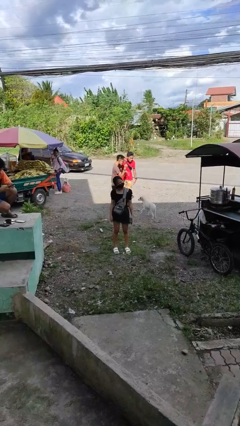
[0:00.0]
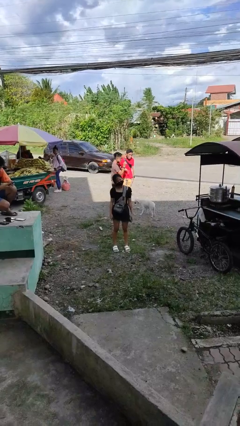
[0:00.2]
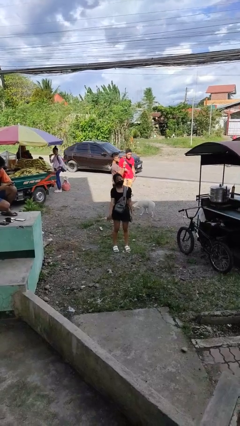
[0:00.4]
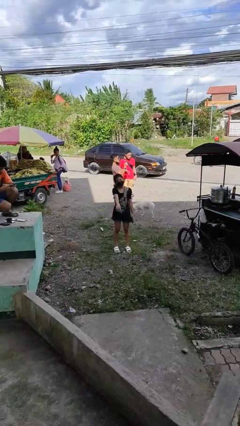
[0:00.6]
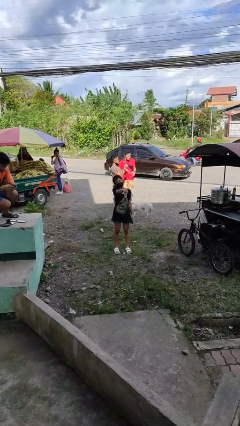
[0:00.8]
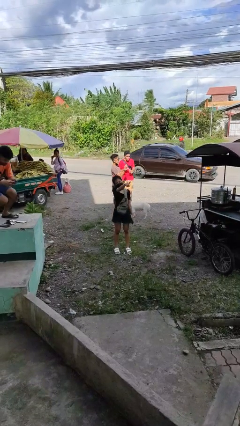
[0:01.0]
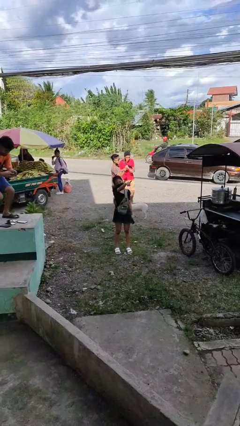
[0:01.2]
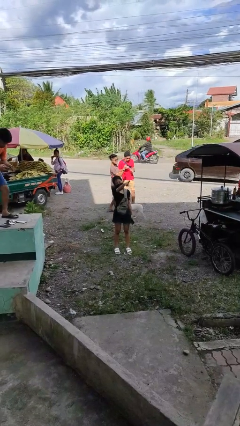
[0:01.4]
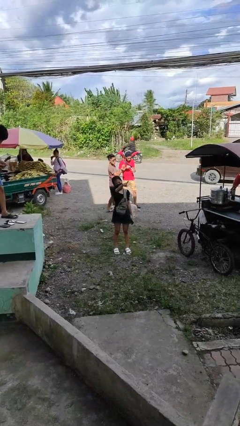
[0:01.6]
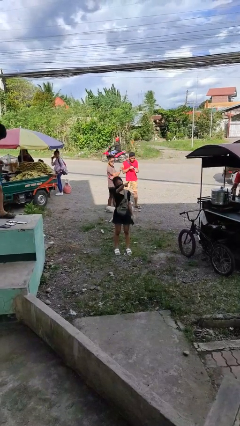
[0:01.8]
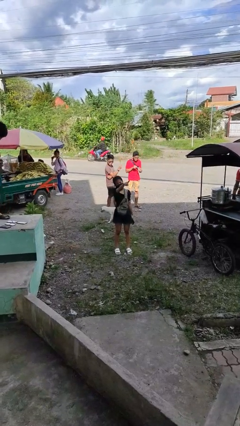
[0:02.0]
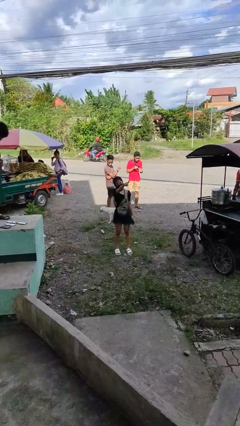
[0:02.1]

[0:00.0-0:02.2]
person points at person

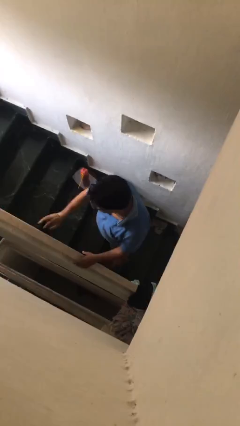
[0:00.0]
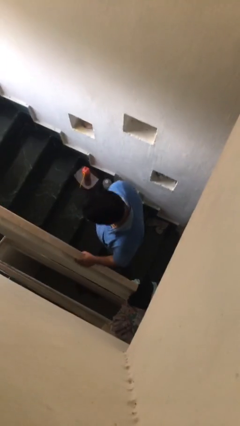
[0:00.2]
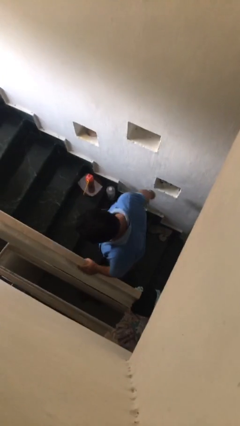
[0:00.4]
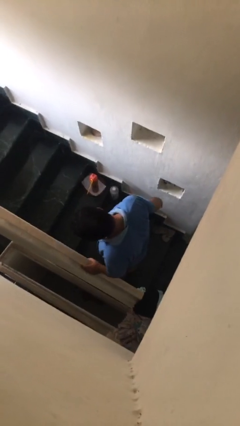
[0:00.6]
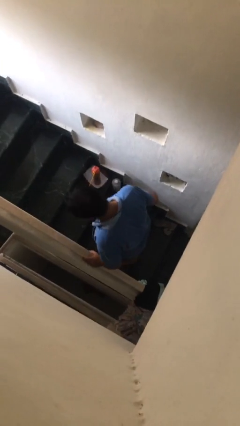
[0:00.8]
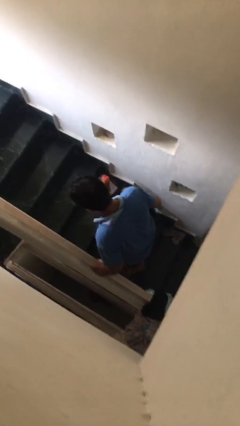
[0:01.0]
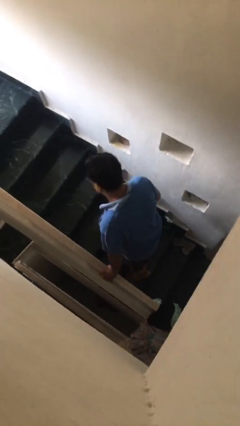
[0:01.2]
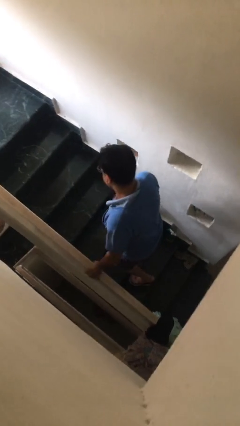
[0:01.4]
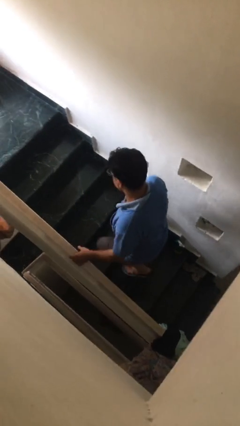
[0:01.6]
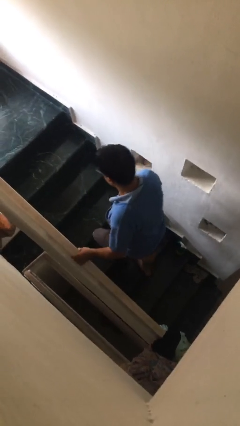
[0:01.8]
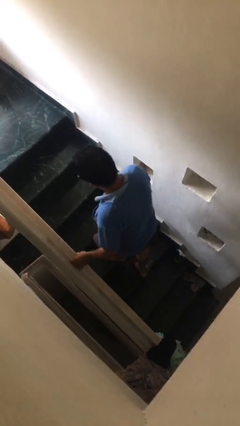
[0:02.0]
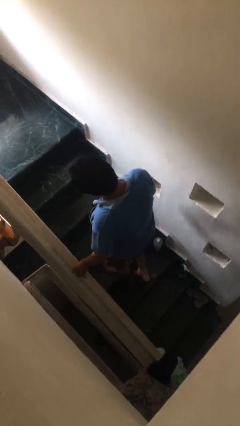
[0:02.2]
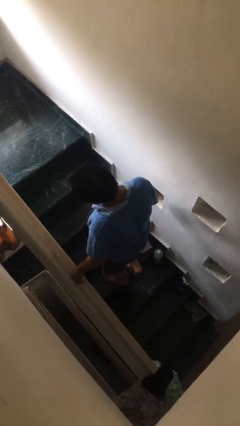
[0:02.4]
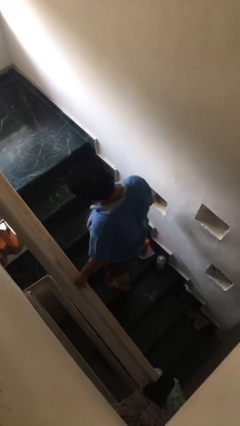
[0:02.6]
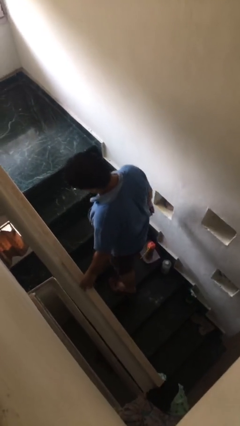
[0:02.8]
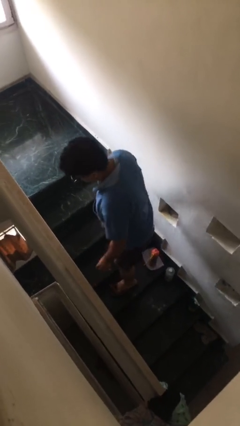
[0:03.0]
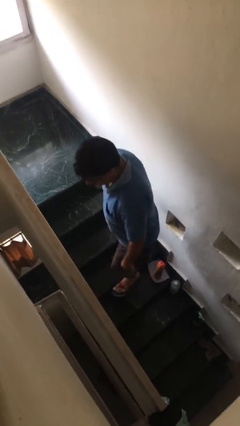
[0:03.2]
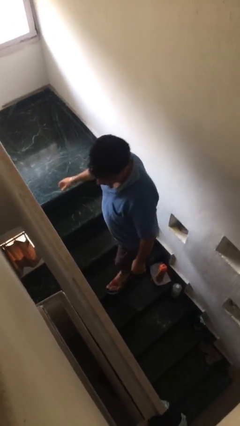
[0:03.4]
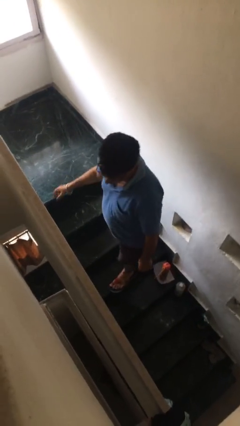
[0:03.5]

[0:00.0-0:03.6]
person climbs up stairs

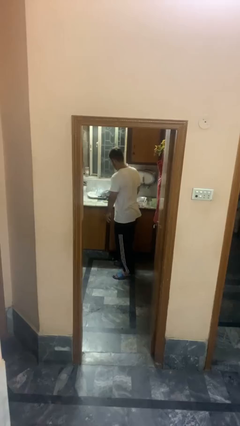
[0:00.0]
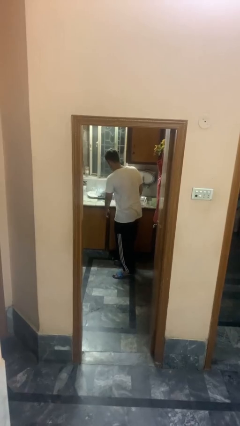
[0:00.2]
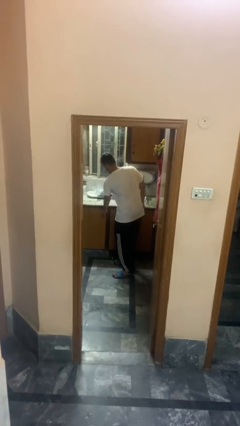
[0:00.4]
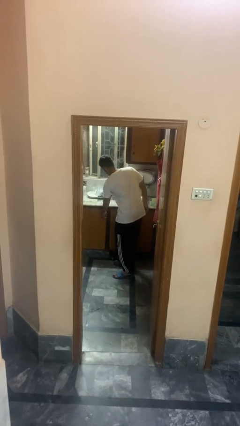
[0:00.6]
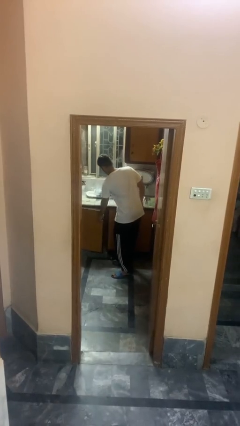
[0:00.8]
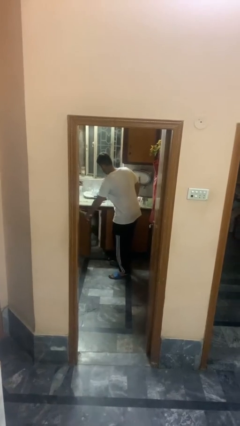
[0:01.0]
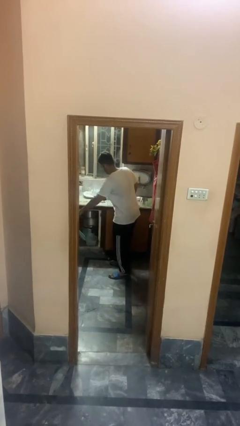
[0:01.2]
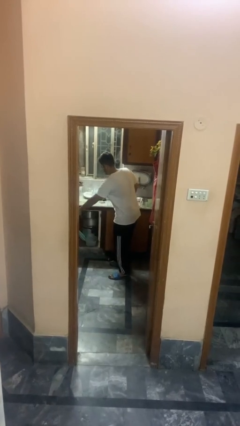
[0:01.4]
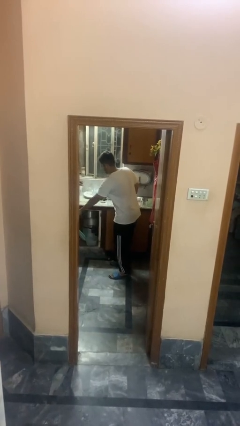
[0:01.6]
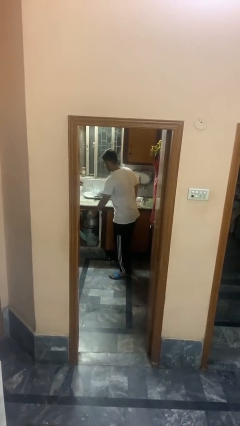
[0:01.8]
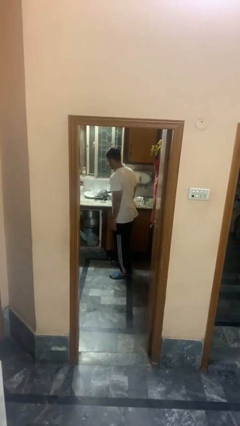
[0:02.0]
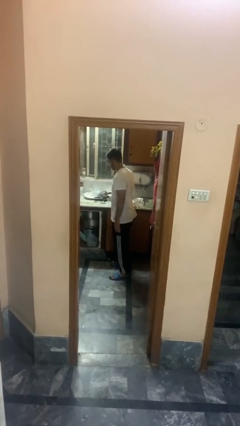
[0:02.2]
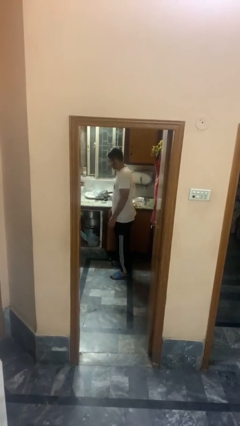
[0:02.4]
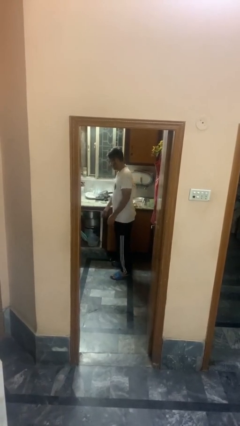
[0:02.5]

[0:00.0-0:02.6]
person opens cabinet

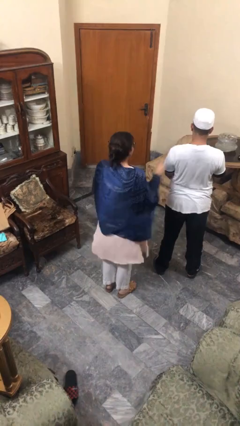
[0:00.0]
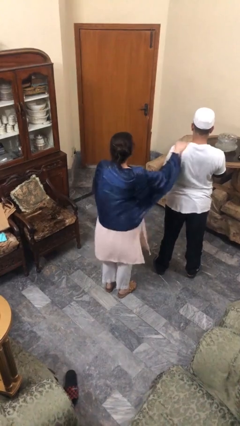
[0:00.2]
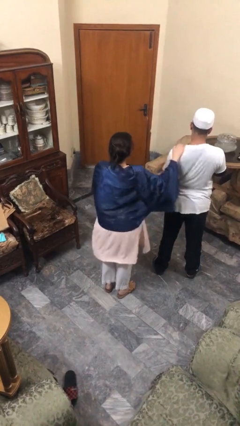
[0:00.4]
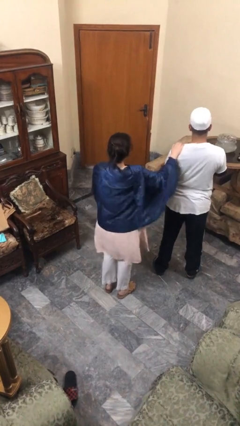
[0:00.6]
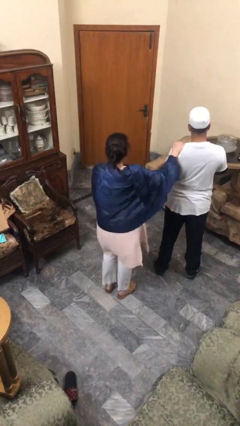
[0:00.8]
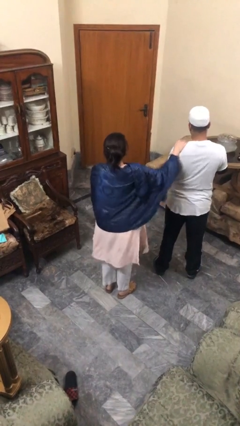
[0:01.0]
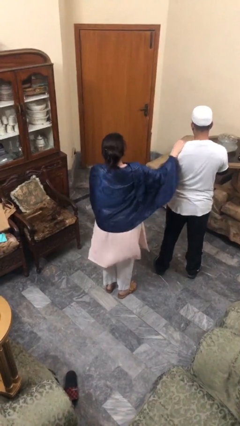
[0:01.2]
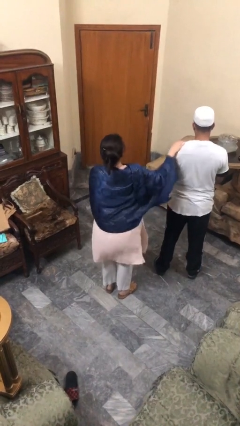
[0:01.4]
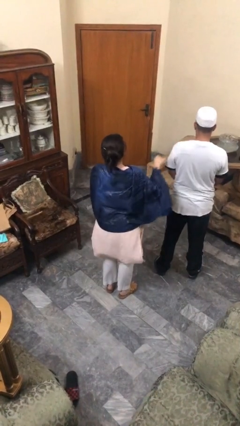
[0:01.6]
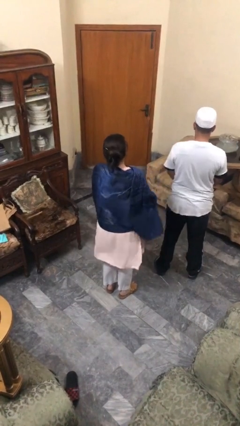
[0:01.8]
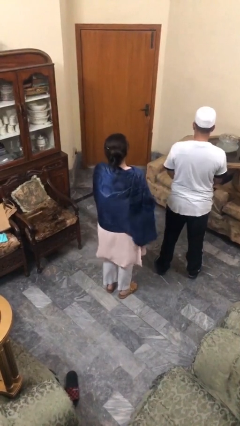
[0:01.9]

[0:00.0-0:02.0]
person pounds shoulders of person

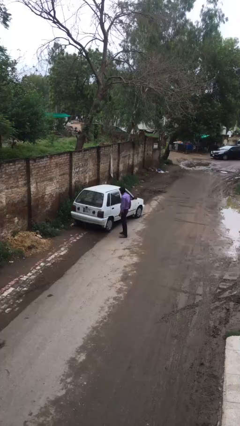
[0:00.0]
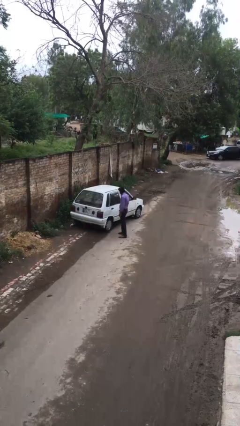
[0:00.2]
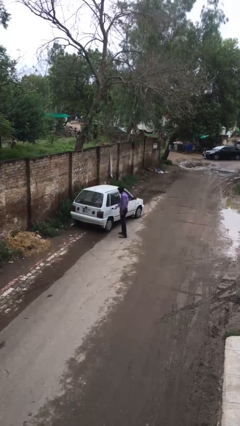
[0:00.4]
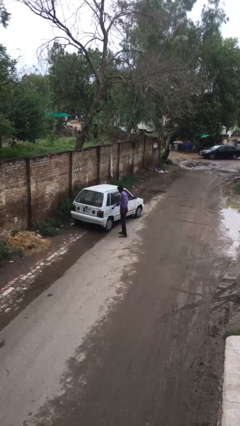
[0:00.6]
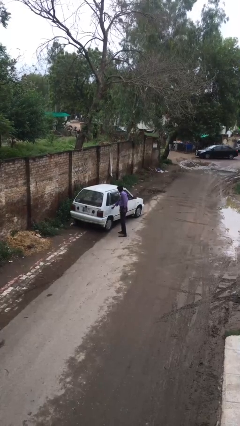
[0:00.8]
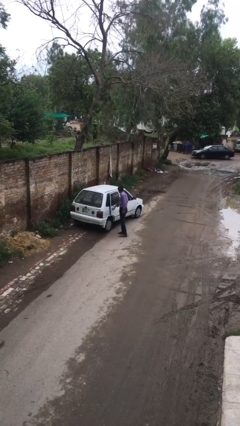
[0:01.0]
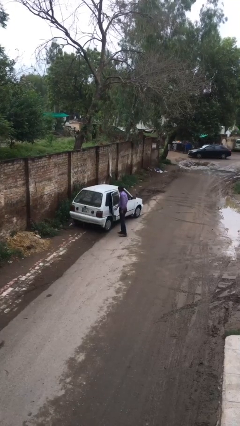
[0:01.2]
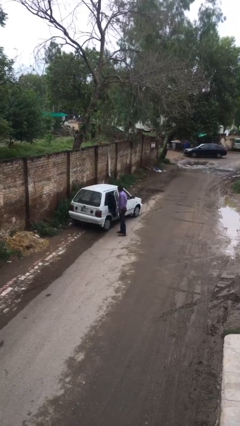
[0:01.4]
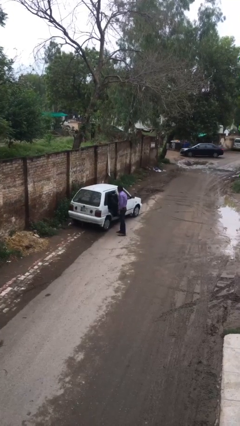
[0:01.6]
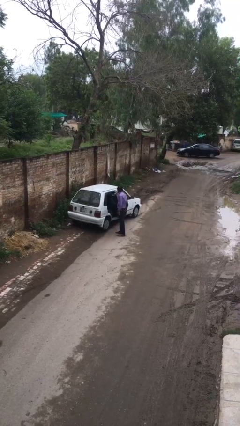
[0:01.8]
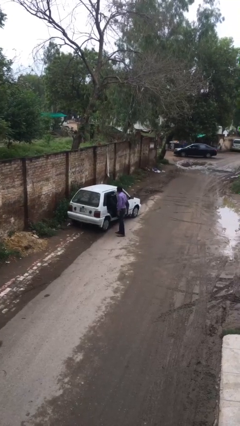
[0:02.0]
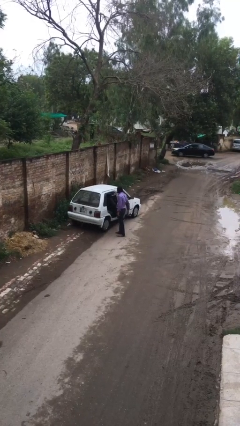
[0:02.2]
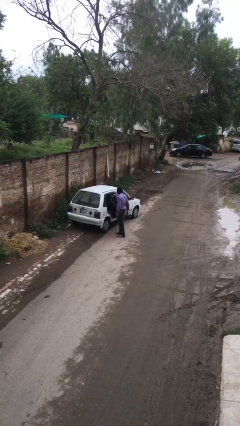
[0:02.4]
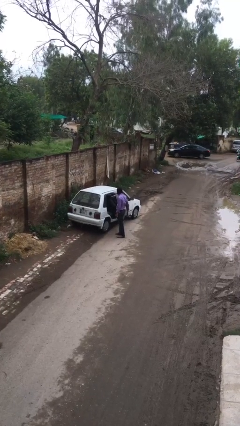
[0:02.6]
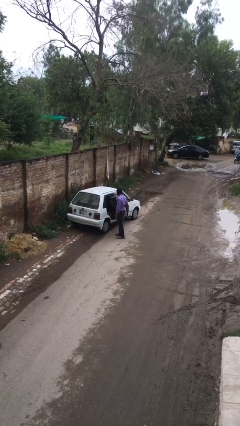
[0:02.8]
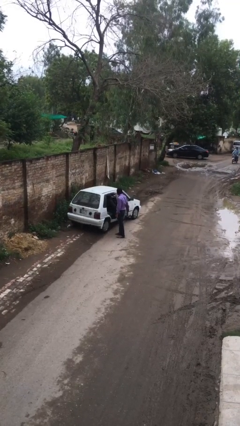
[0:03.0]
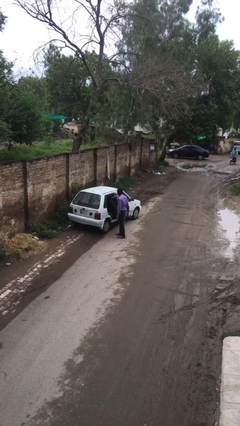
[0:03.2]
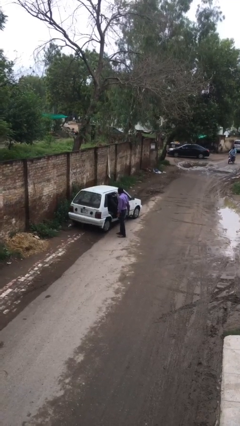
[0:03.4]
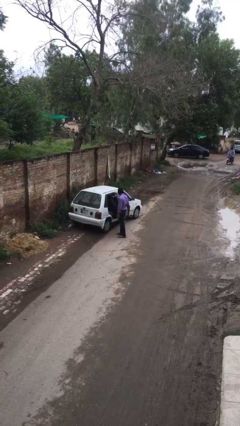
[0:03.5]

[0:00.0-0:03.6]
person opens car door

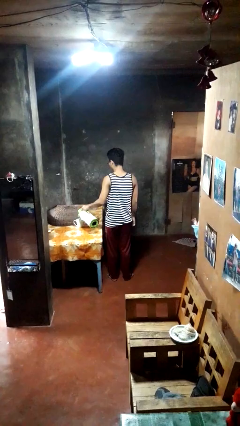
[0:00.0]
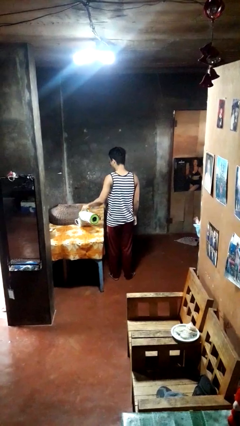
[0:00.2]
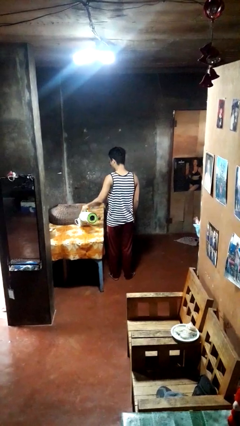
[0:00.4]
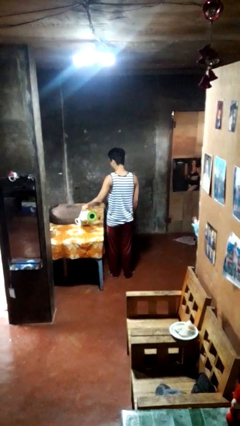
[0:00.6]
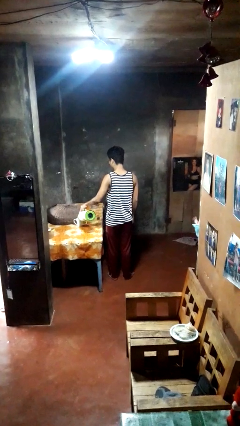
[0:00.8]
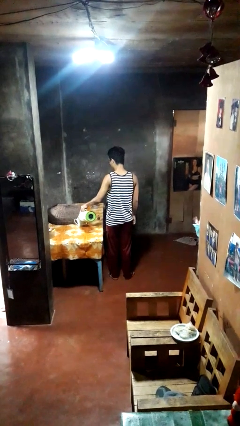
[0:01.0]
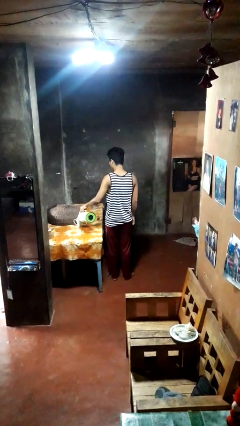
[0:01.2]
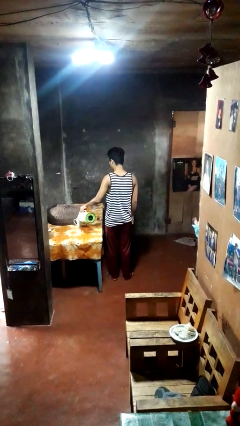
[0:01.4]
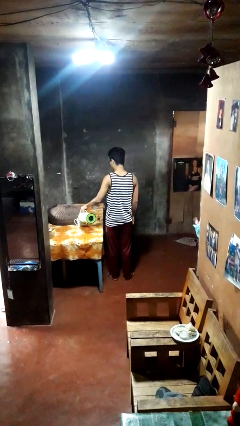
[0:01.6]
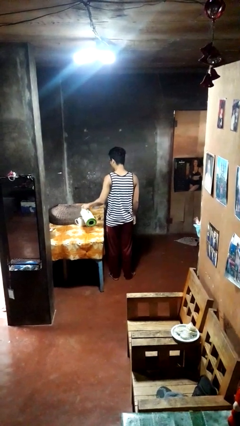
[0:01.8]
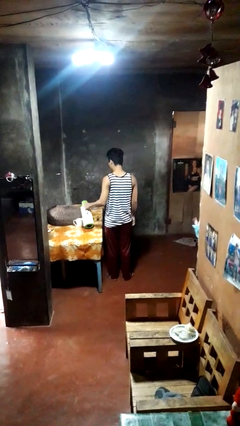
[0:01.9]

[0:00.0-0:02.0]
person pours coffee into mug

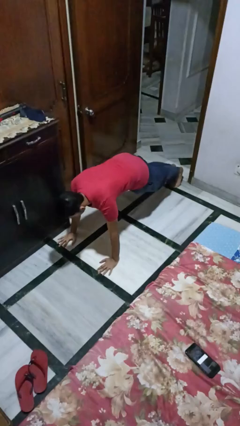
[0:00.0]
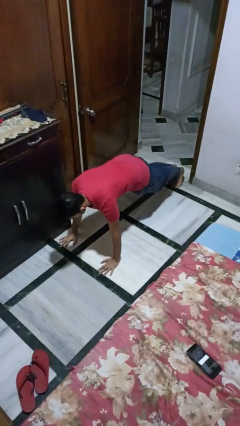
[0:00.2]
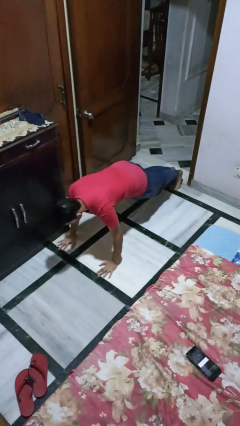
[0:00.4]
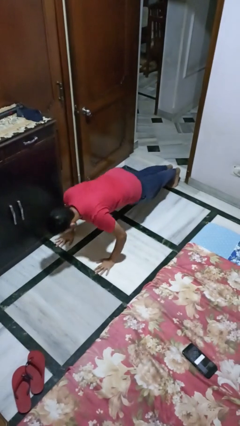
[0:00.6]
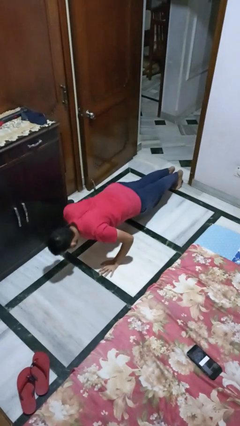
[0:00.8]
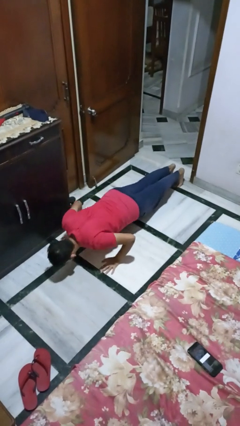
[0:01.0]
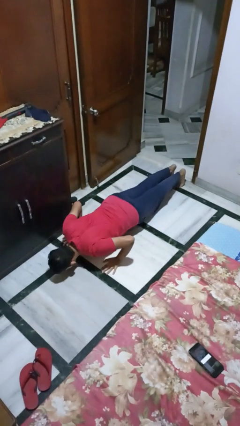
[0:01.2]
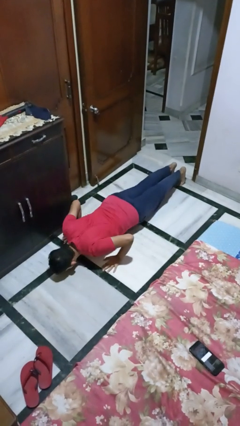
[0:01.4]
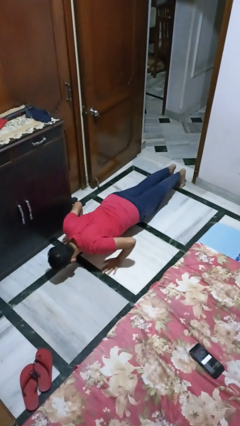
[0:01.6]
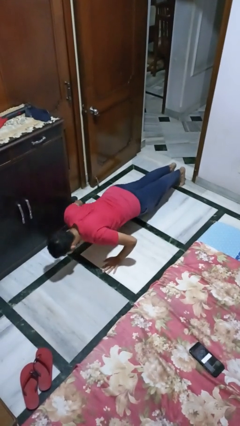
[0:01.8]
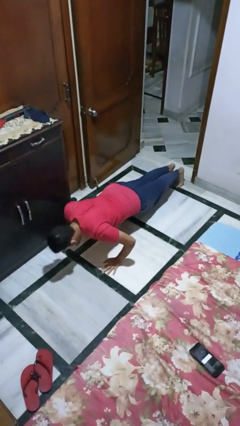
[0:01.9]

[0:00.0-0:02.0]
person exercises with pushup
